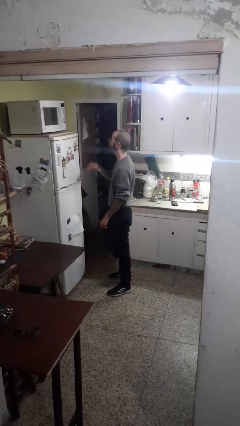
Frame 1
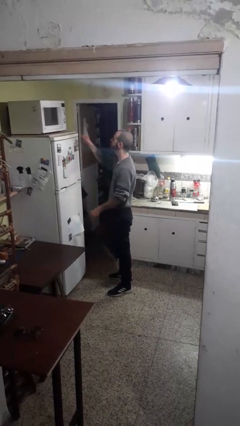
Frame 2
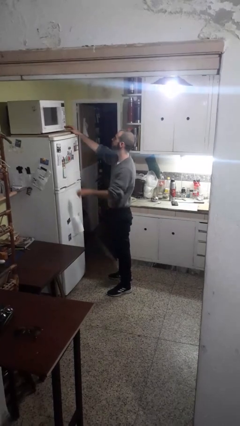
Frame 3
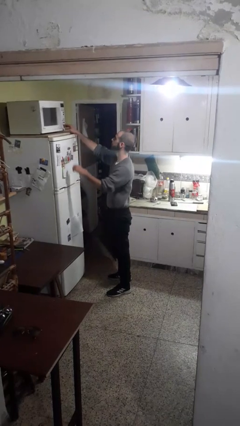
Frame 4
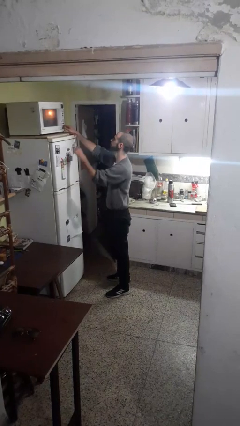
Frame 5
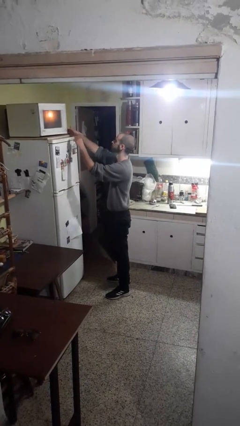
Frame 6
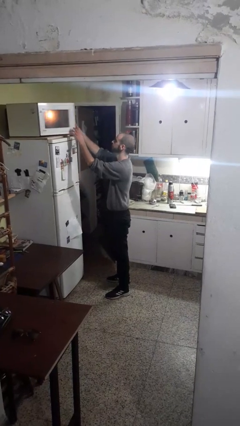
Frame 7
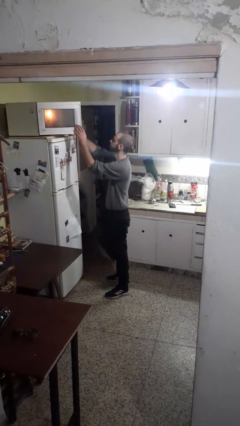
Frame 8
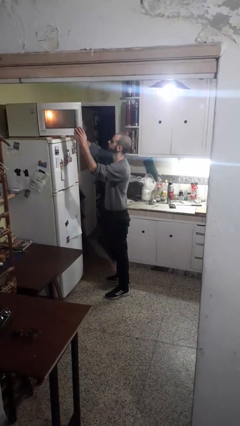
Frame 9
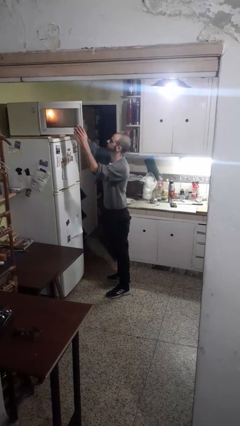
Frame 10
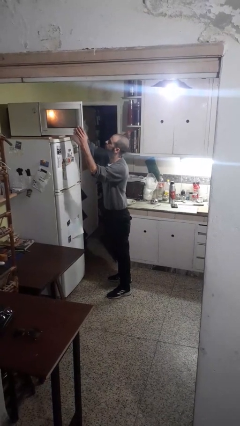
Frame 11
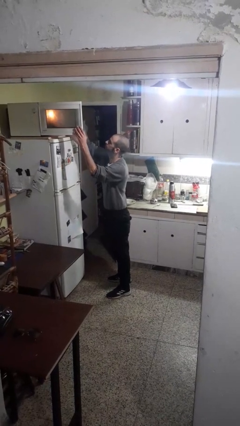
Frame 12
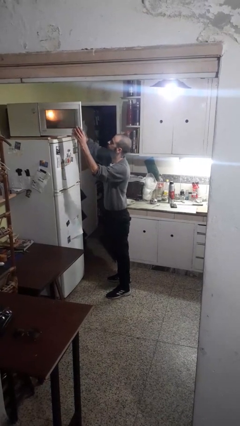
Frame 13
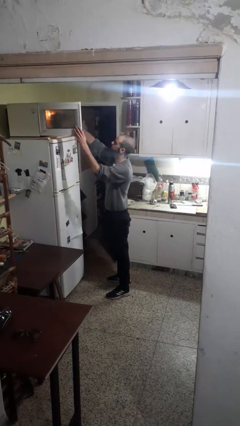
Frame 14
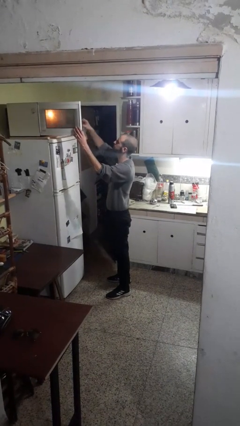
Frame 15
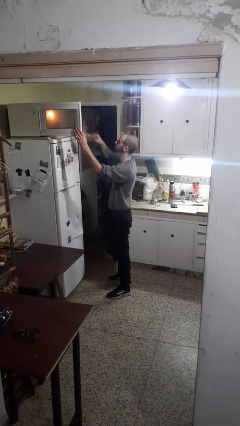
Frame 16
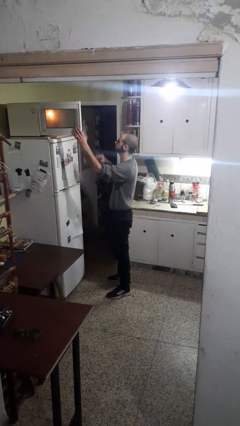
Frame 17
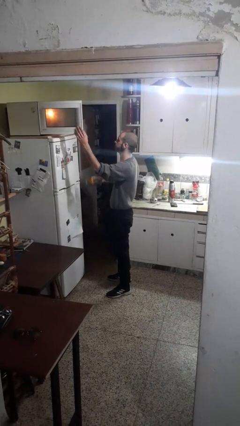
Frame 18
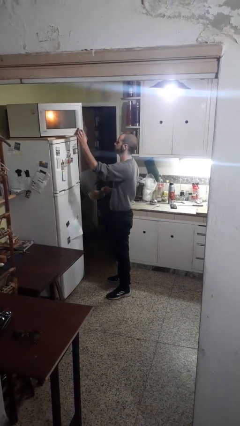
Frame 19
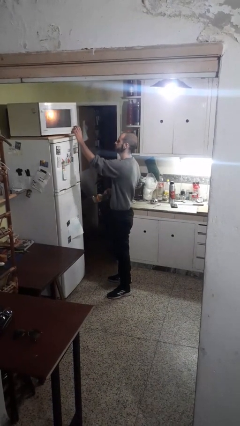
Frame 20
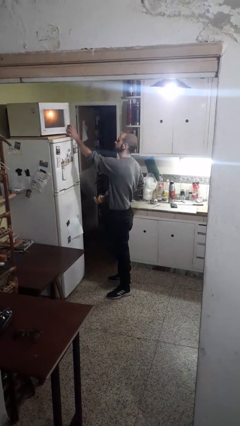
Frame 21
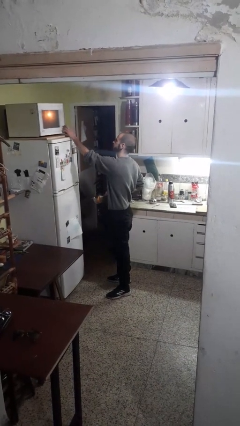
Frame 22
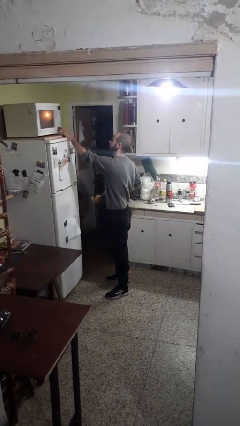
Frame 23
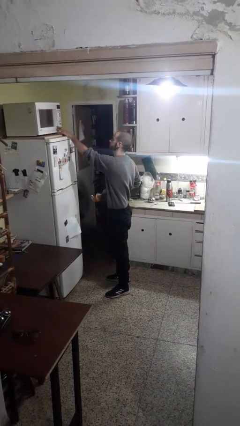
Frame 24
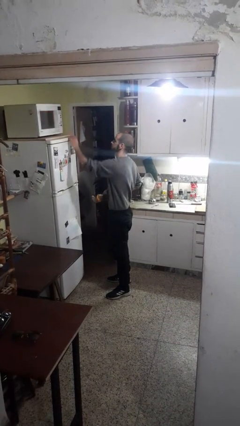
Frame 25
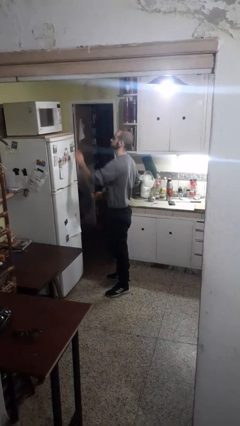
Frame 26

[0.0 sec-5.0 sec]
person takes object from microwave

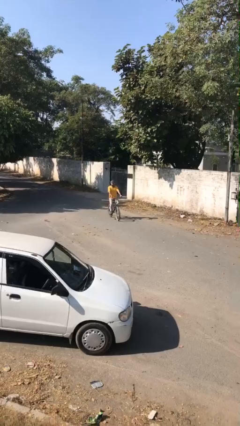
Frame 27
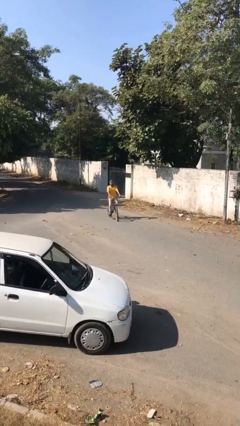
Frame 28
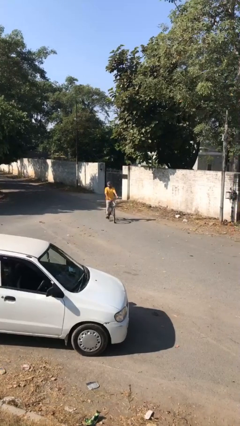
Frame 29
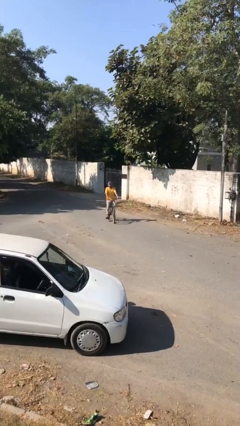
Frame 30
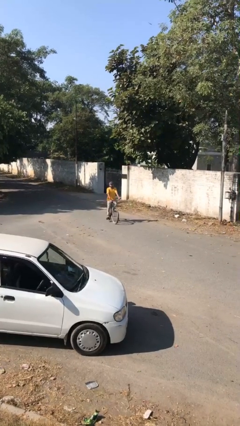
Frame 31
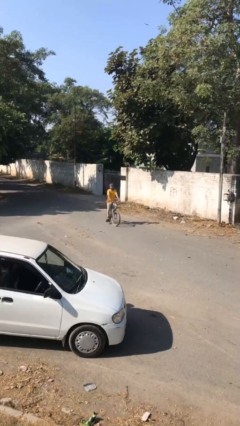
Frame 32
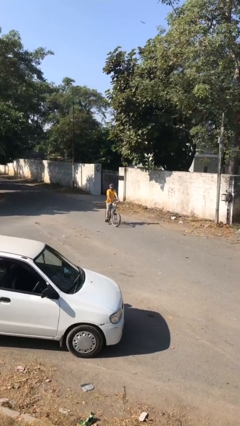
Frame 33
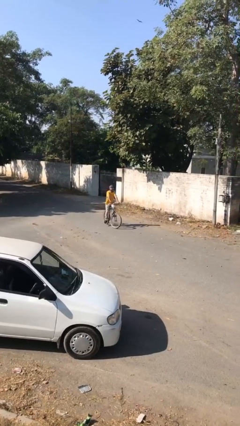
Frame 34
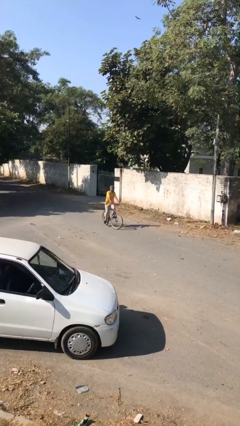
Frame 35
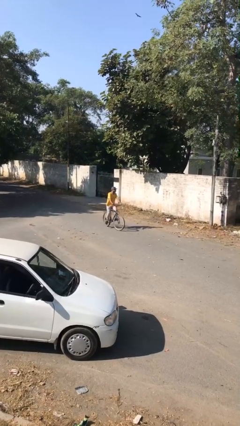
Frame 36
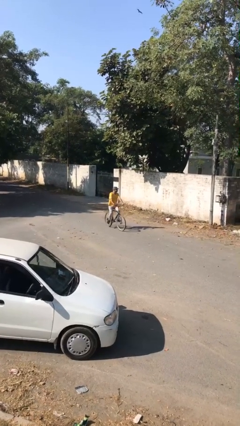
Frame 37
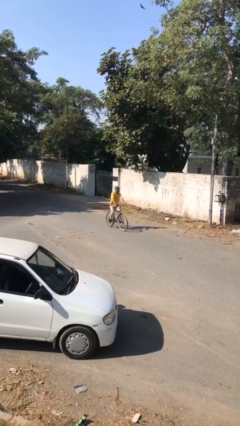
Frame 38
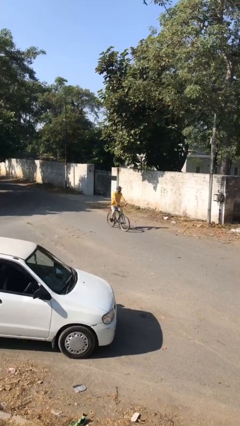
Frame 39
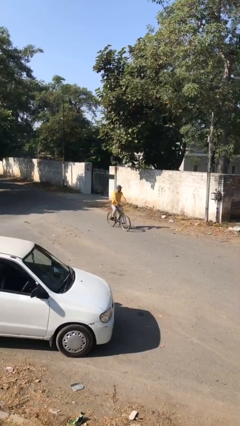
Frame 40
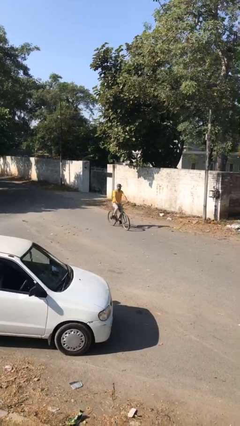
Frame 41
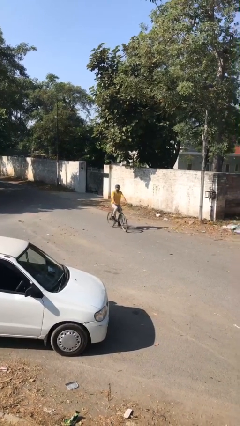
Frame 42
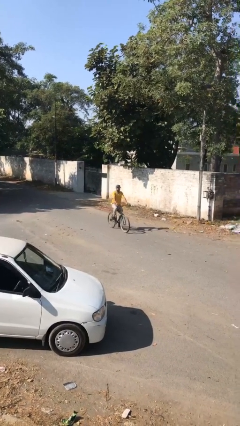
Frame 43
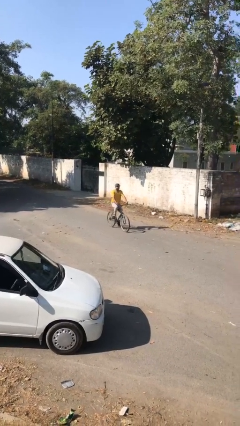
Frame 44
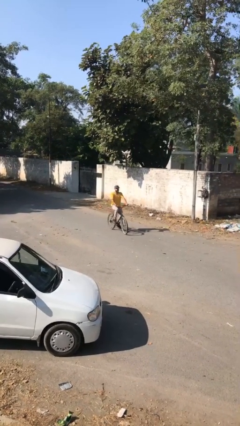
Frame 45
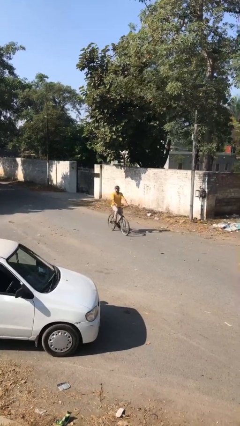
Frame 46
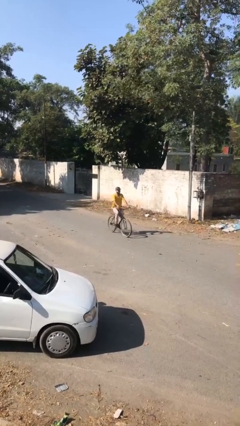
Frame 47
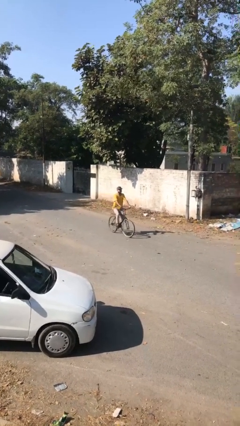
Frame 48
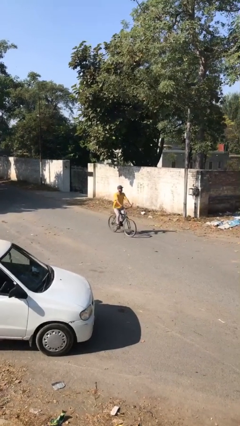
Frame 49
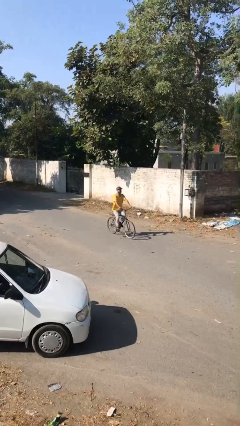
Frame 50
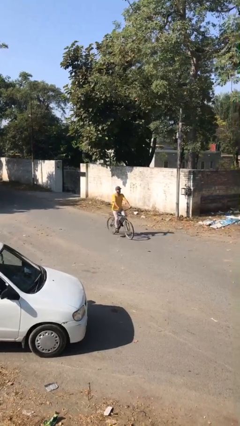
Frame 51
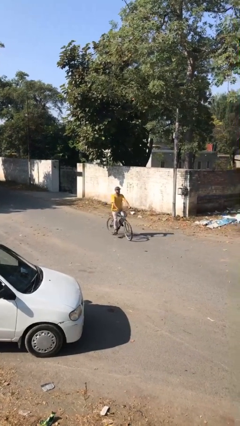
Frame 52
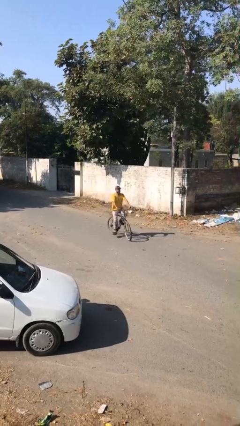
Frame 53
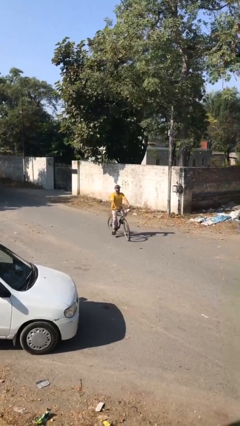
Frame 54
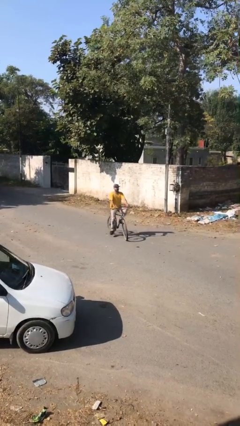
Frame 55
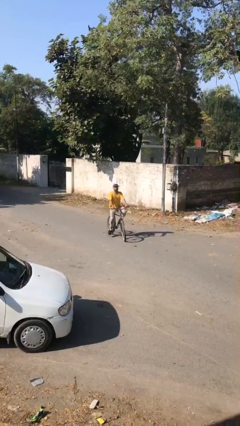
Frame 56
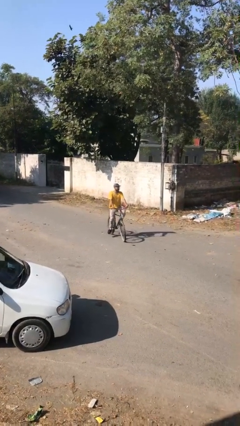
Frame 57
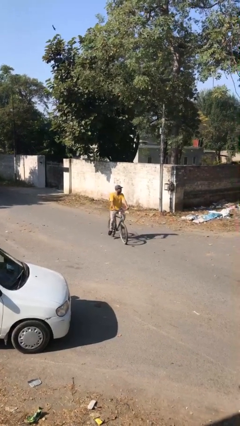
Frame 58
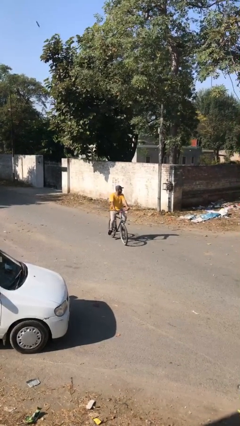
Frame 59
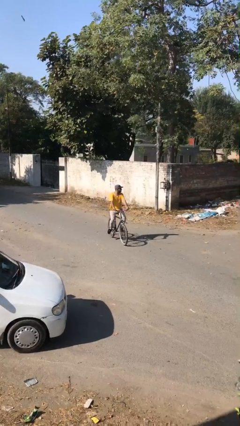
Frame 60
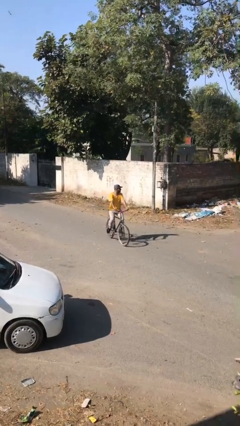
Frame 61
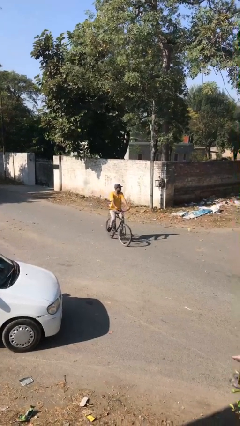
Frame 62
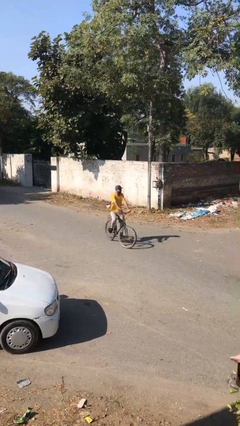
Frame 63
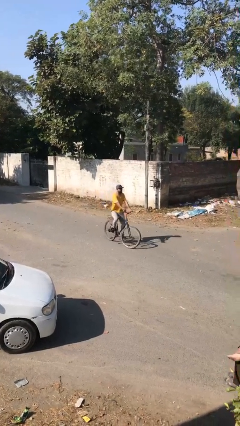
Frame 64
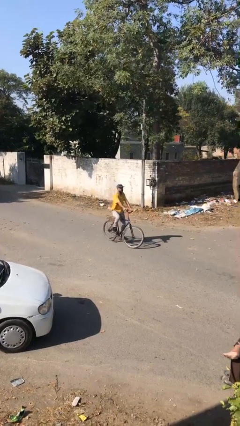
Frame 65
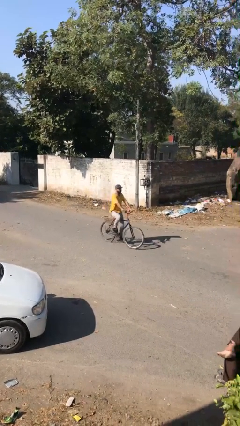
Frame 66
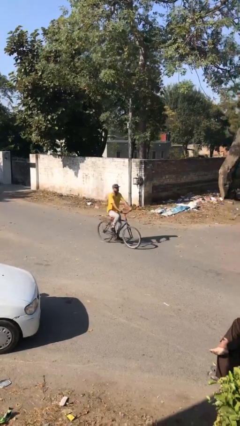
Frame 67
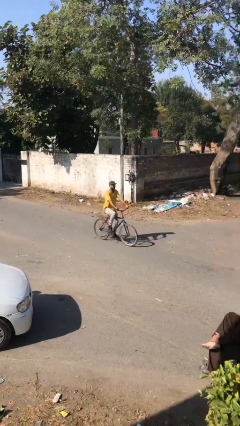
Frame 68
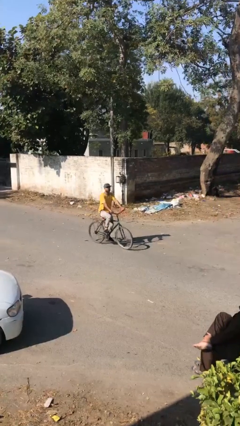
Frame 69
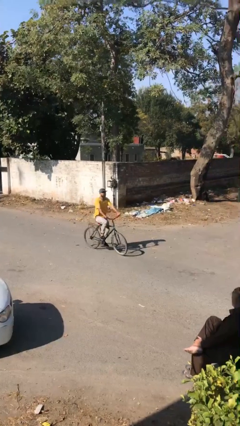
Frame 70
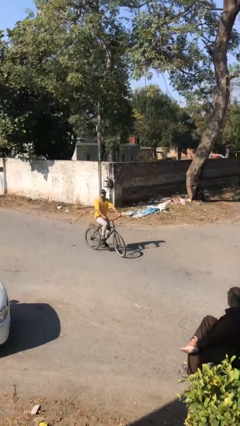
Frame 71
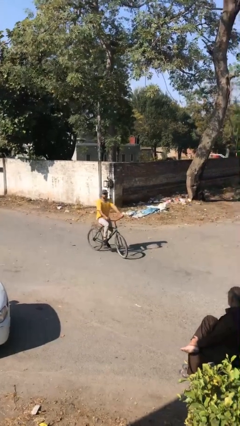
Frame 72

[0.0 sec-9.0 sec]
person rides bicycle

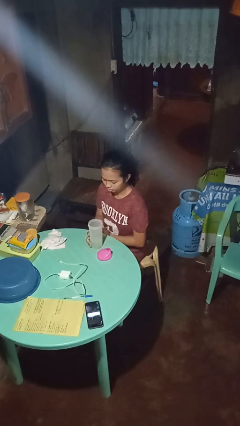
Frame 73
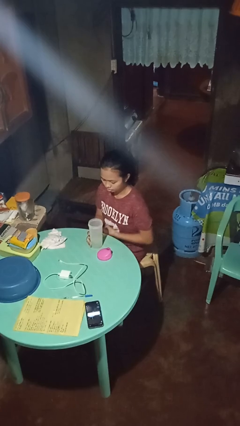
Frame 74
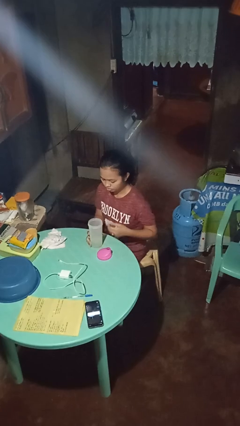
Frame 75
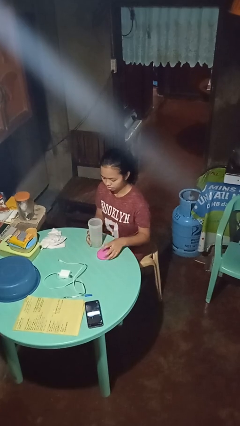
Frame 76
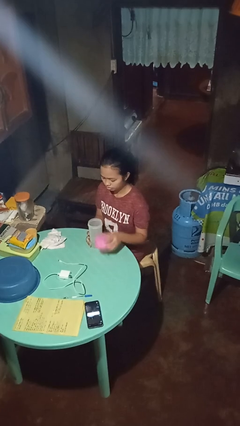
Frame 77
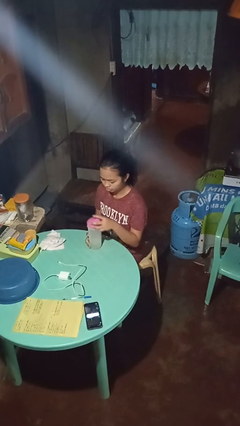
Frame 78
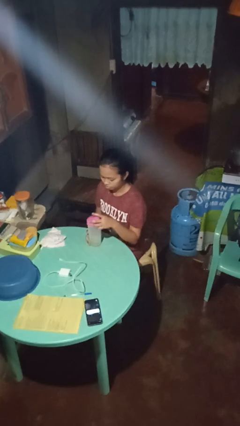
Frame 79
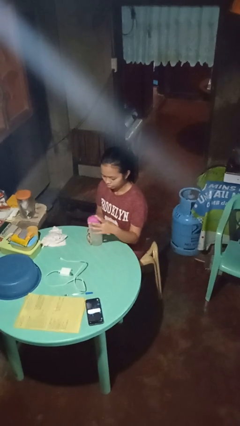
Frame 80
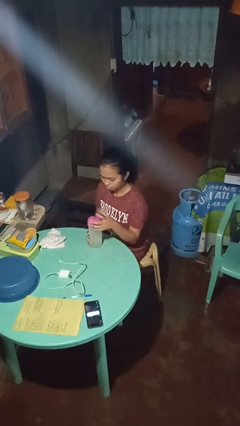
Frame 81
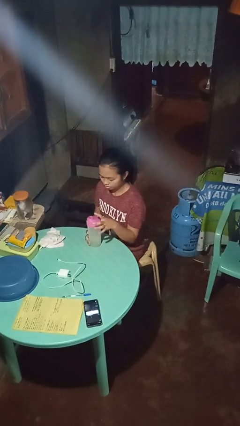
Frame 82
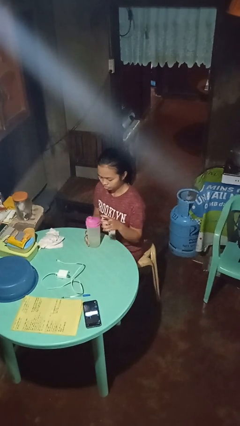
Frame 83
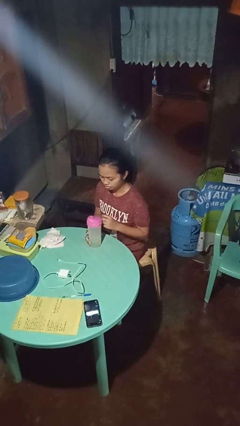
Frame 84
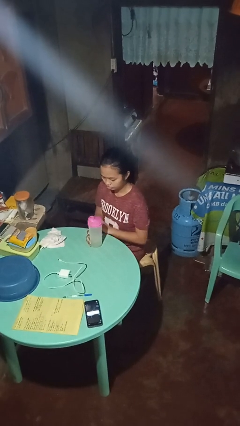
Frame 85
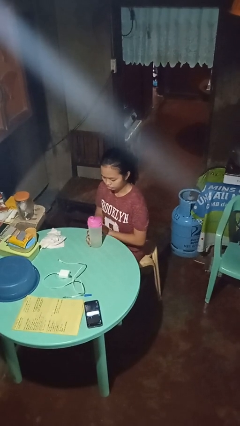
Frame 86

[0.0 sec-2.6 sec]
person screws lid to bottle

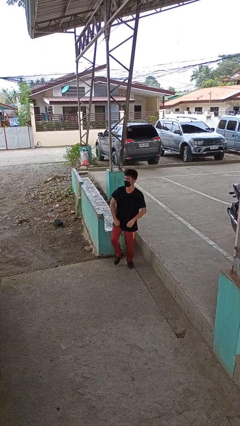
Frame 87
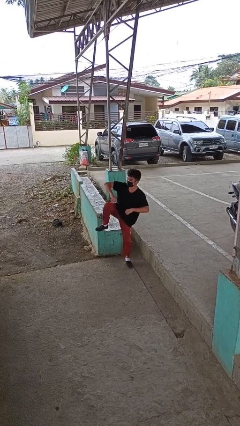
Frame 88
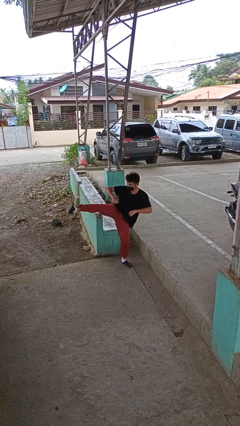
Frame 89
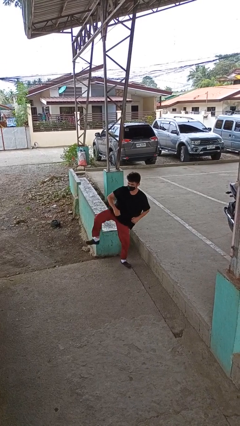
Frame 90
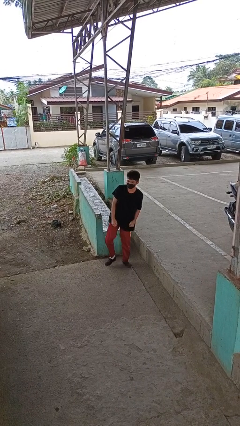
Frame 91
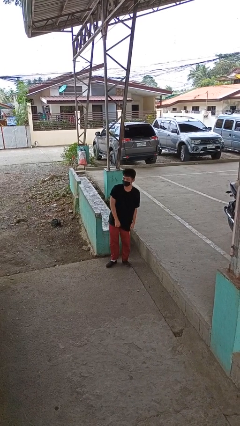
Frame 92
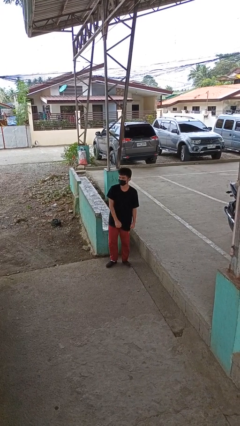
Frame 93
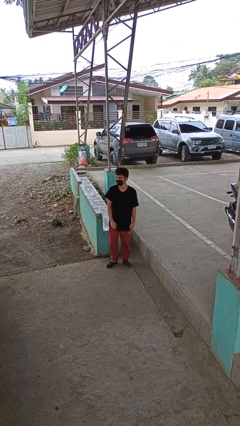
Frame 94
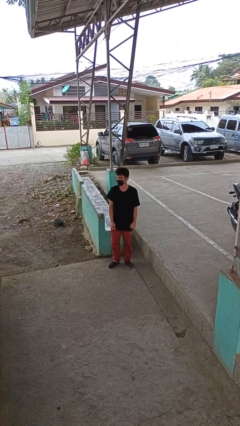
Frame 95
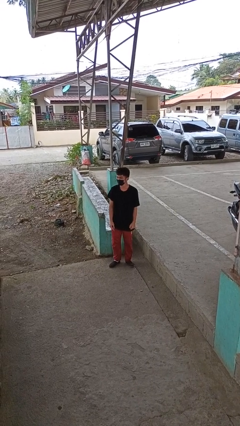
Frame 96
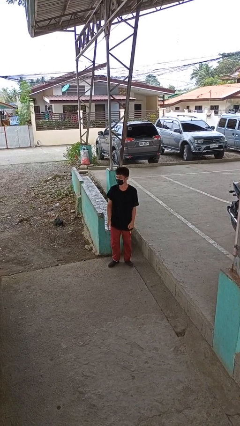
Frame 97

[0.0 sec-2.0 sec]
person karate kicks
